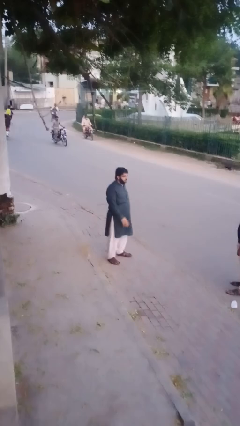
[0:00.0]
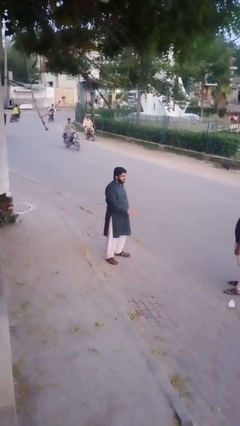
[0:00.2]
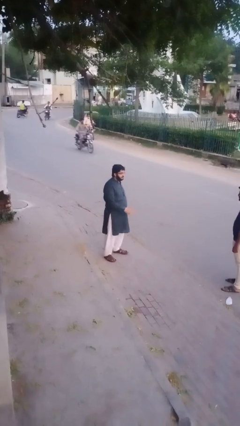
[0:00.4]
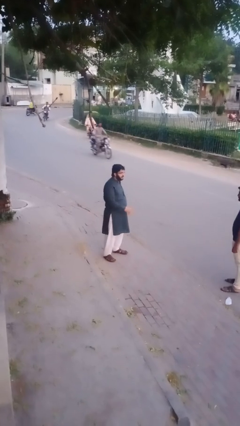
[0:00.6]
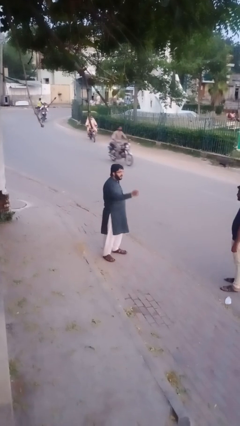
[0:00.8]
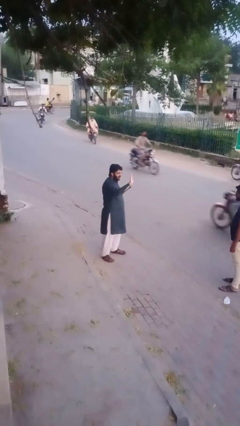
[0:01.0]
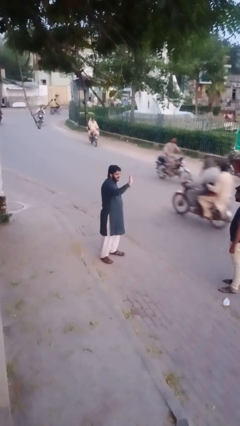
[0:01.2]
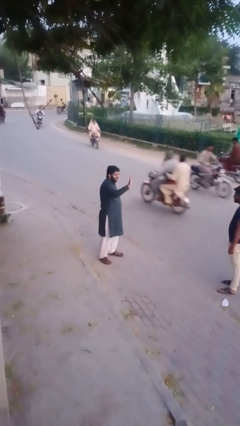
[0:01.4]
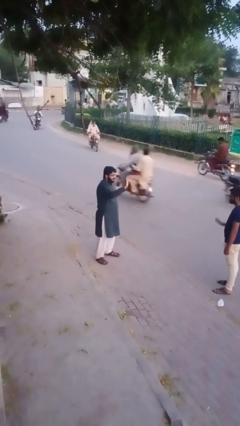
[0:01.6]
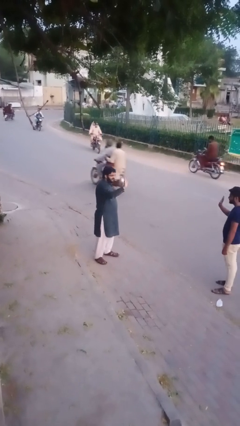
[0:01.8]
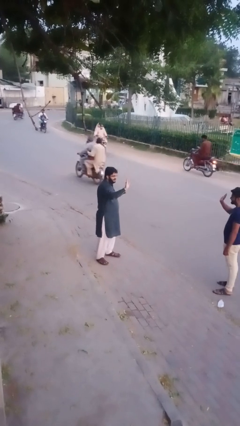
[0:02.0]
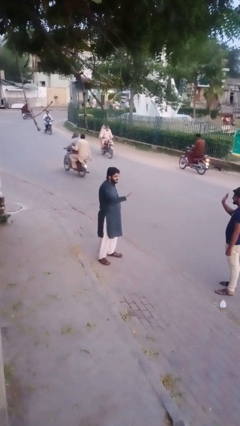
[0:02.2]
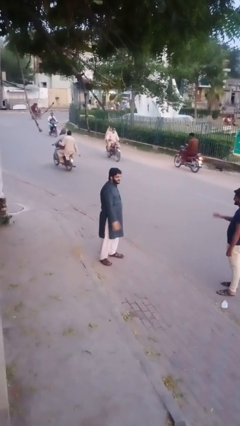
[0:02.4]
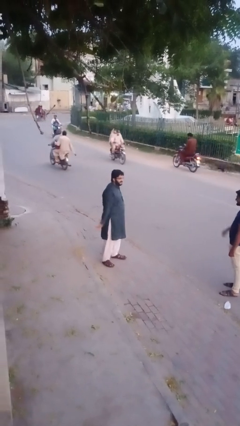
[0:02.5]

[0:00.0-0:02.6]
person waves at person

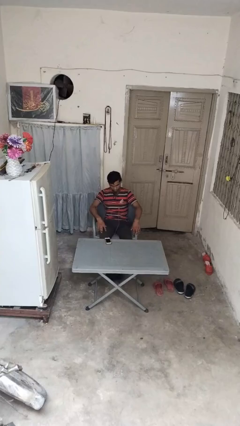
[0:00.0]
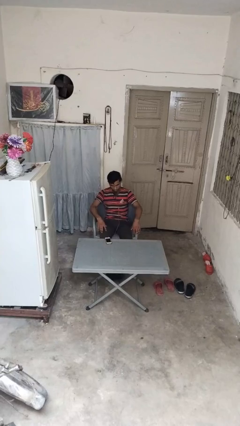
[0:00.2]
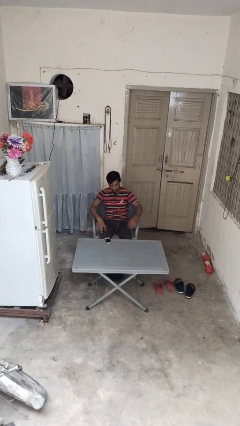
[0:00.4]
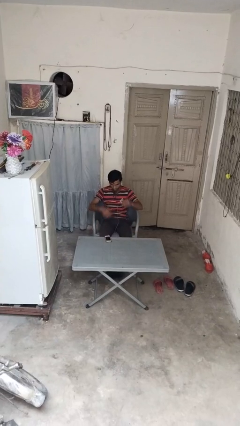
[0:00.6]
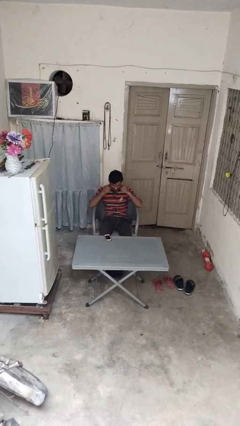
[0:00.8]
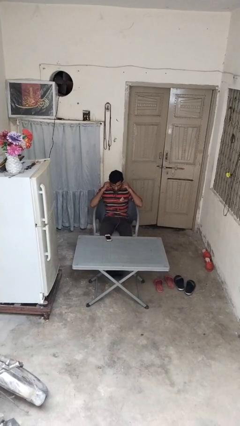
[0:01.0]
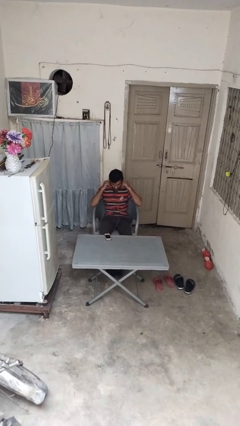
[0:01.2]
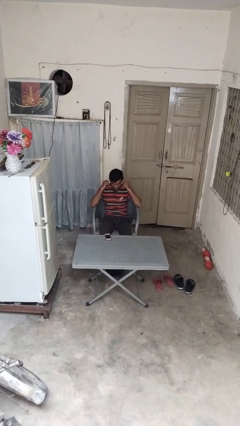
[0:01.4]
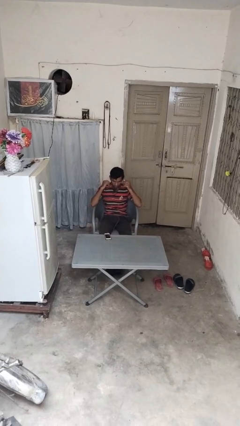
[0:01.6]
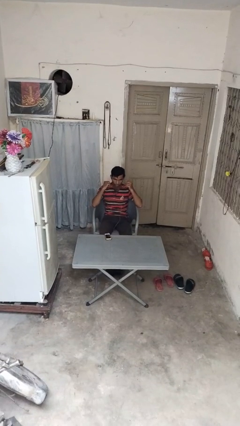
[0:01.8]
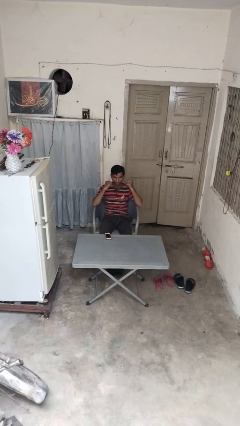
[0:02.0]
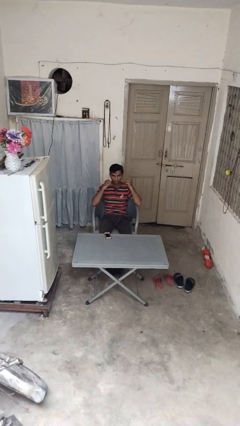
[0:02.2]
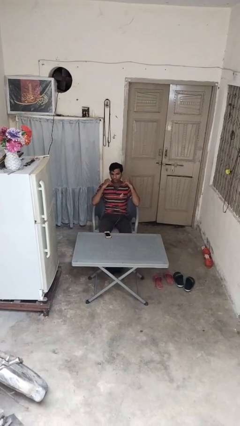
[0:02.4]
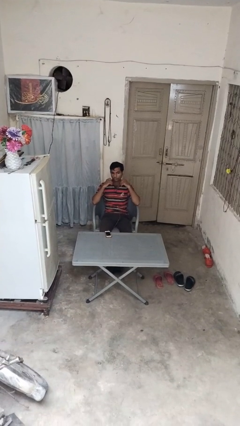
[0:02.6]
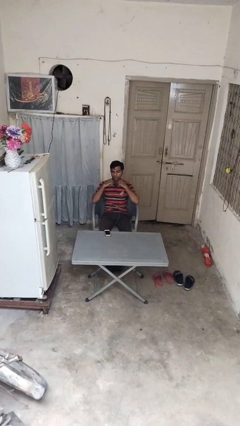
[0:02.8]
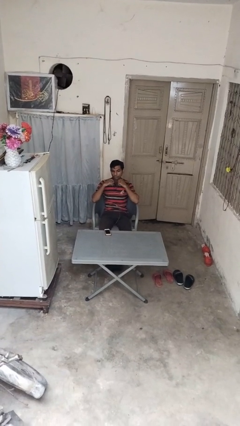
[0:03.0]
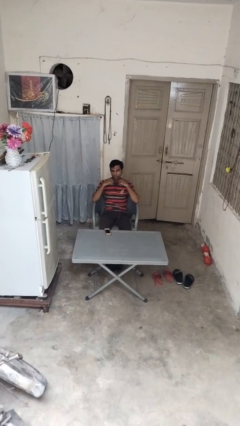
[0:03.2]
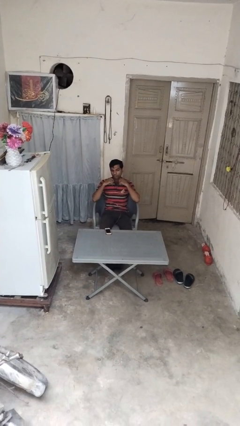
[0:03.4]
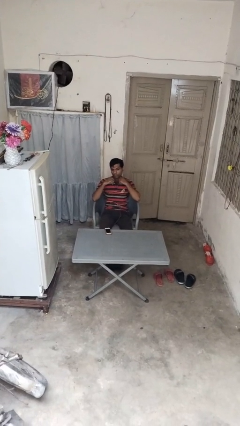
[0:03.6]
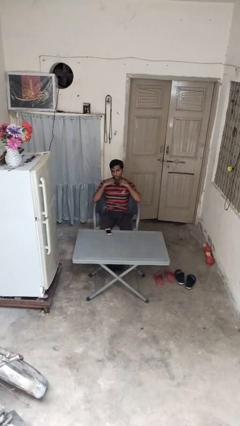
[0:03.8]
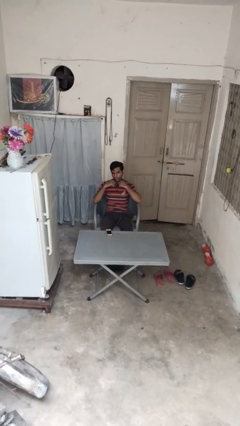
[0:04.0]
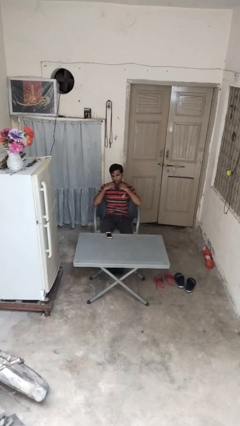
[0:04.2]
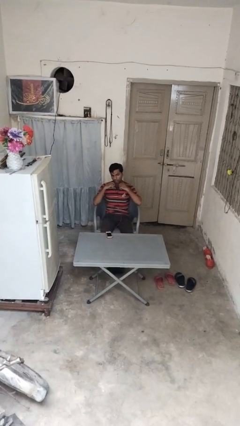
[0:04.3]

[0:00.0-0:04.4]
person takes off headphones

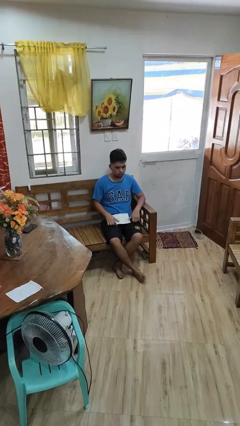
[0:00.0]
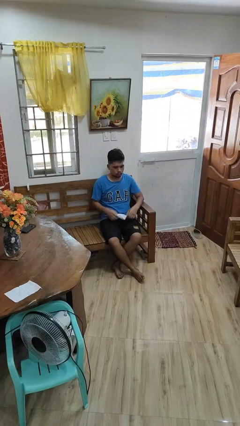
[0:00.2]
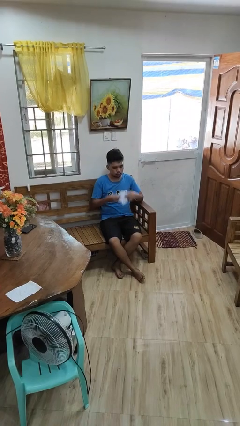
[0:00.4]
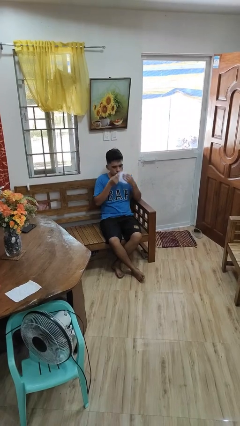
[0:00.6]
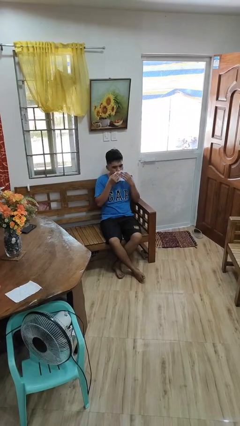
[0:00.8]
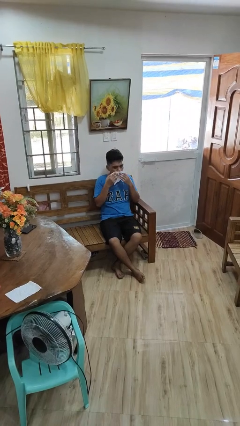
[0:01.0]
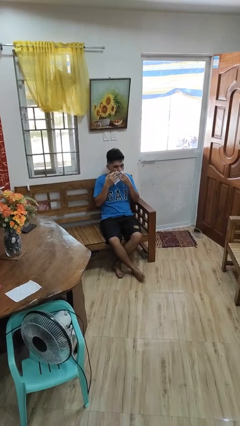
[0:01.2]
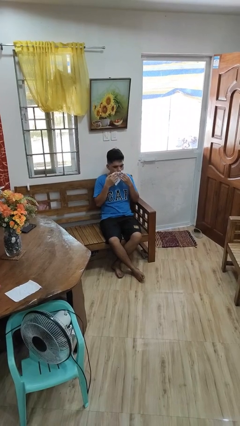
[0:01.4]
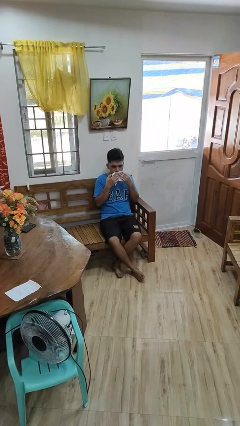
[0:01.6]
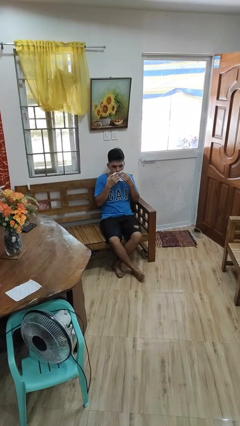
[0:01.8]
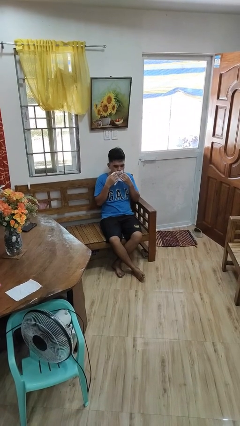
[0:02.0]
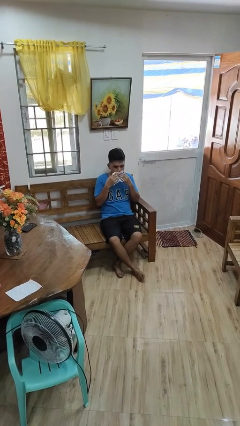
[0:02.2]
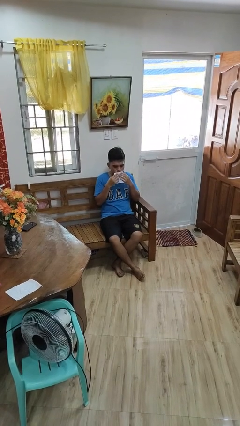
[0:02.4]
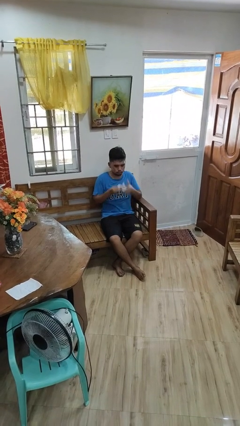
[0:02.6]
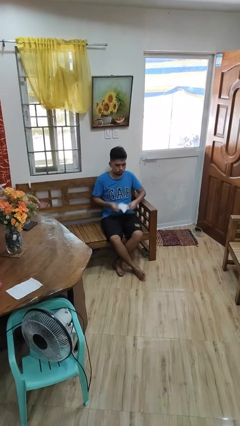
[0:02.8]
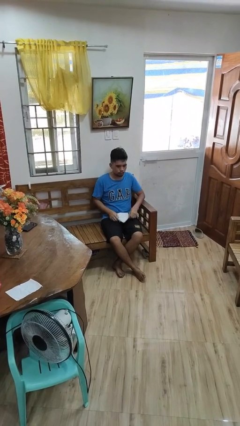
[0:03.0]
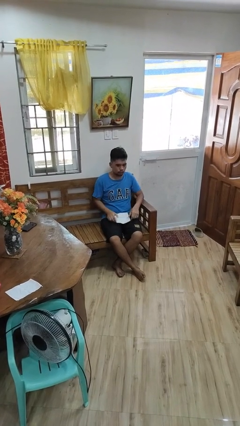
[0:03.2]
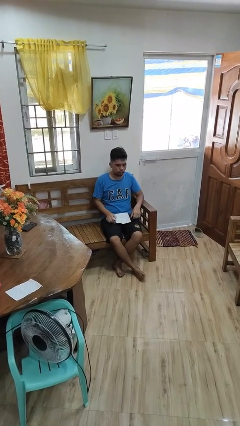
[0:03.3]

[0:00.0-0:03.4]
person wipes mouth with napkin

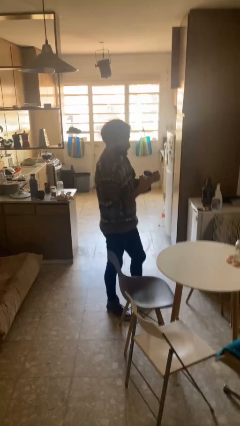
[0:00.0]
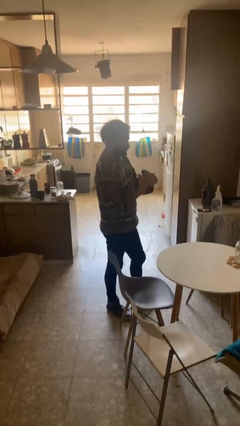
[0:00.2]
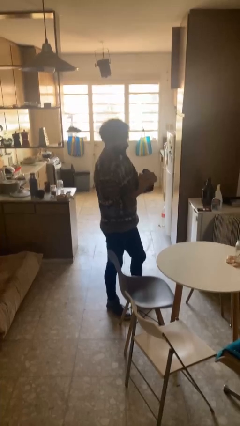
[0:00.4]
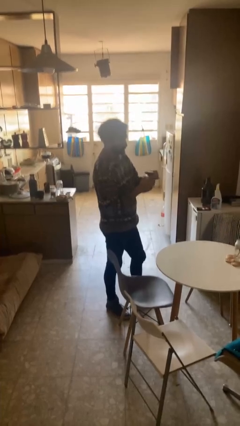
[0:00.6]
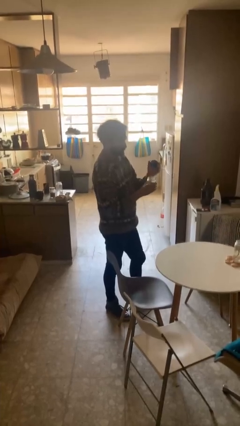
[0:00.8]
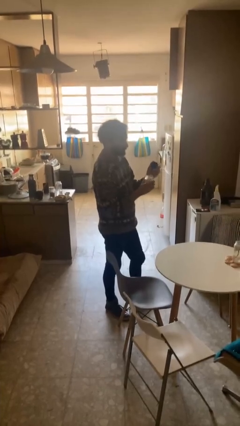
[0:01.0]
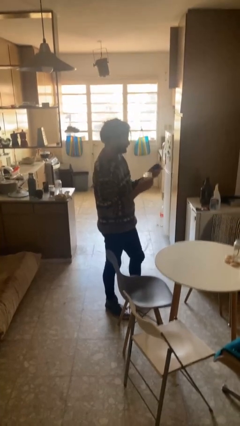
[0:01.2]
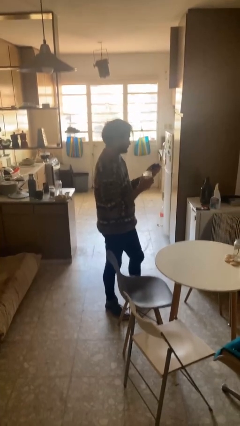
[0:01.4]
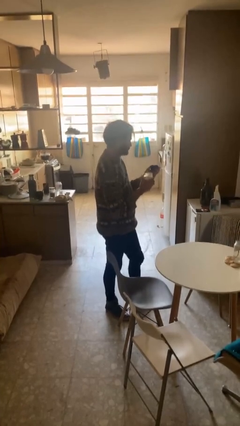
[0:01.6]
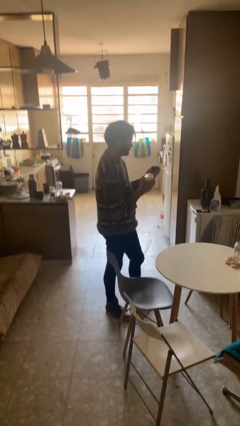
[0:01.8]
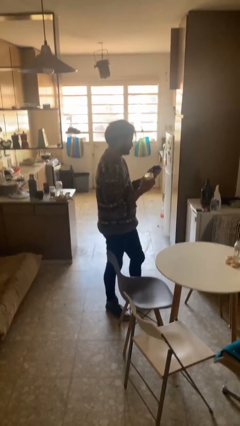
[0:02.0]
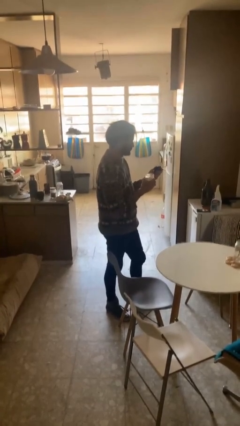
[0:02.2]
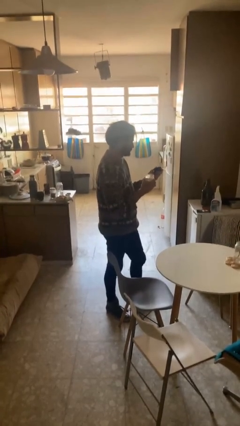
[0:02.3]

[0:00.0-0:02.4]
person opens jar

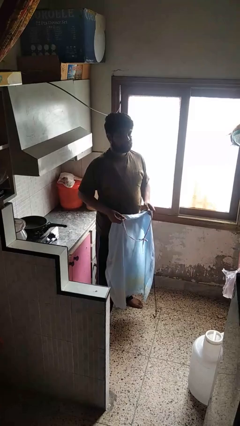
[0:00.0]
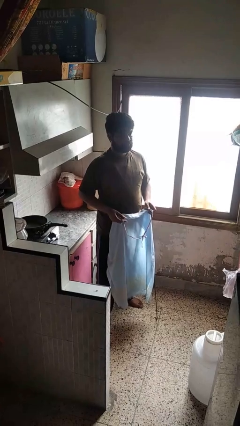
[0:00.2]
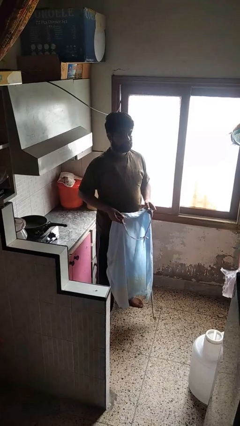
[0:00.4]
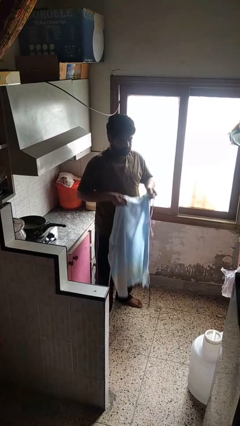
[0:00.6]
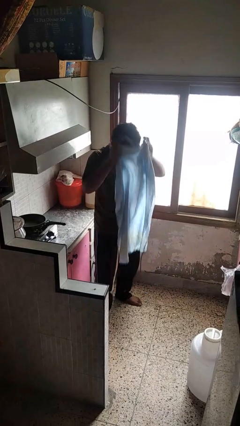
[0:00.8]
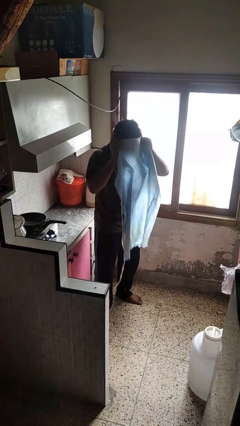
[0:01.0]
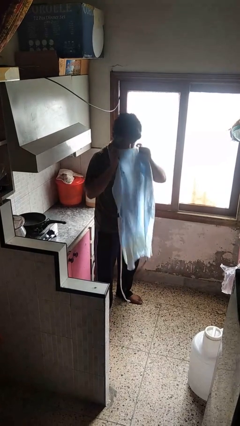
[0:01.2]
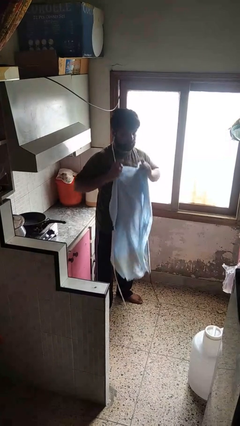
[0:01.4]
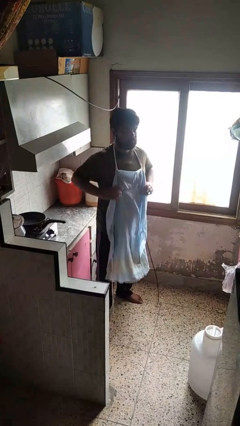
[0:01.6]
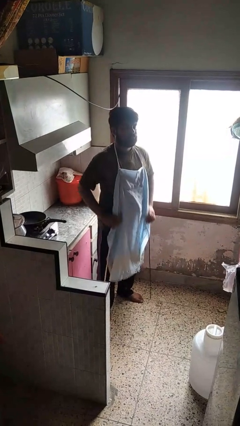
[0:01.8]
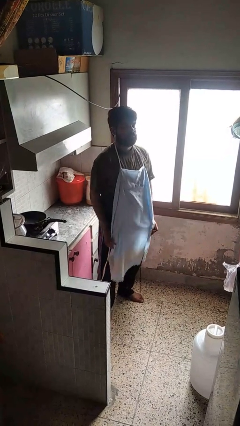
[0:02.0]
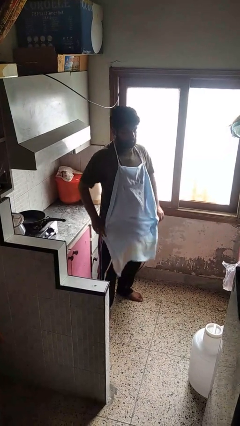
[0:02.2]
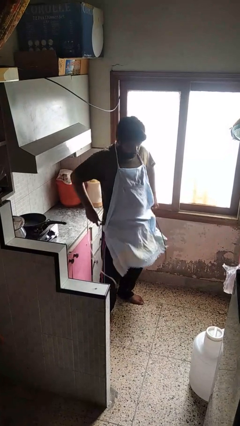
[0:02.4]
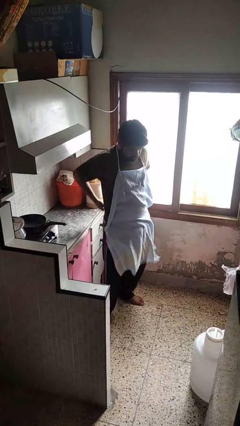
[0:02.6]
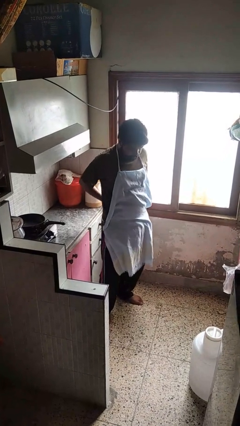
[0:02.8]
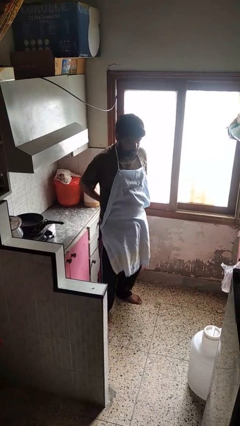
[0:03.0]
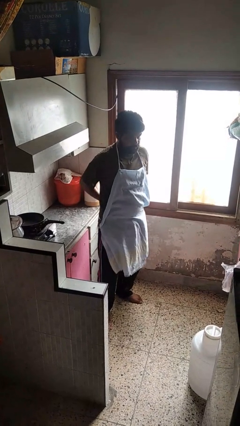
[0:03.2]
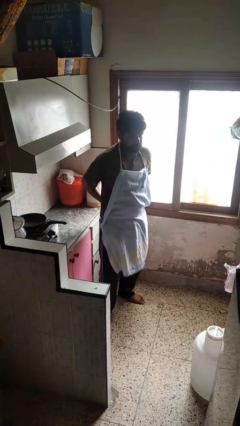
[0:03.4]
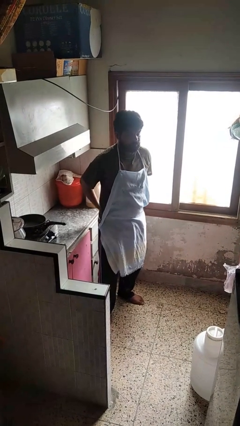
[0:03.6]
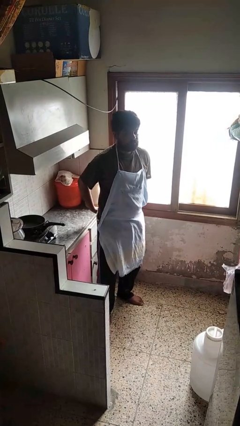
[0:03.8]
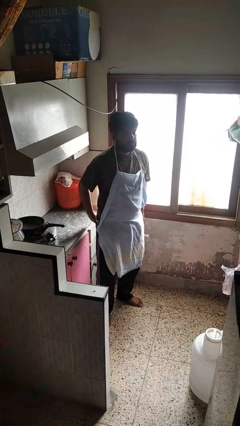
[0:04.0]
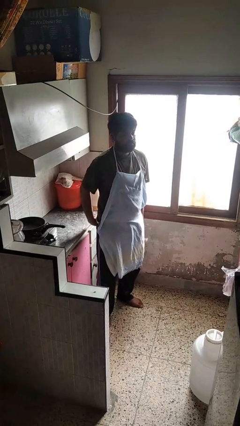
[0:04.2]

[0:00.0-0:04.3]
person puts on apron

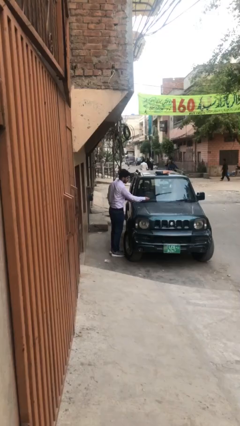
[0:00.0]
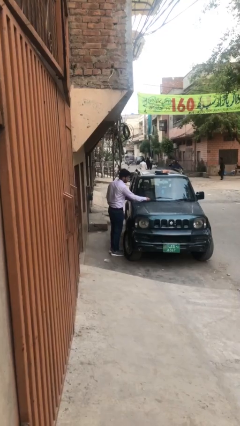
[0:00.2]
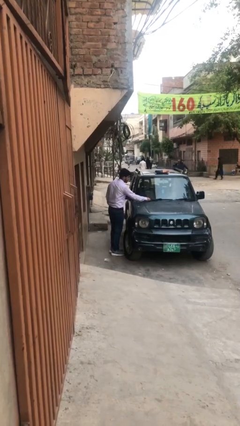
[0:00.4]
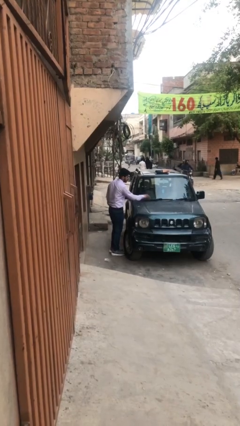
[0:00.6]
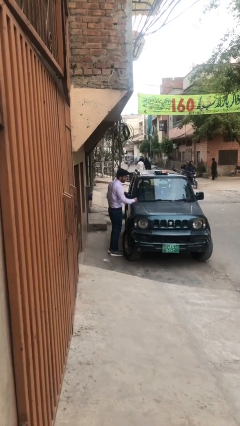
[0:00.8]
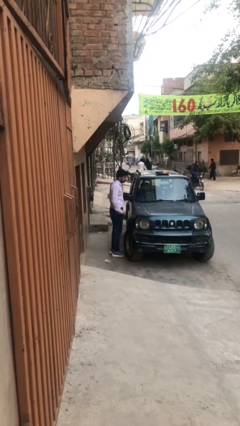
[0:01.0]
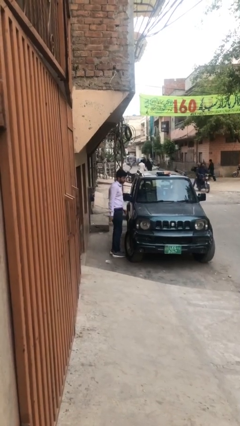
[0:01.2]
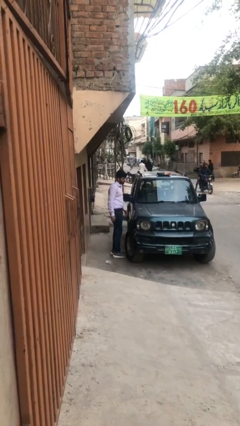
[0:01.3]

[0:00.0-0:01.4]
person flips down car wipers
